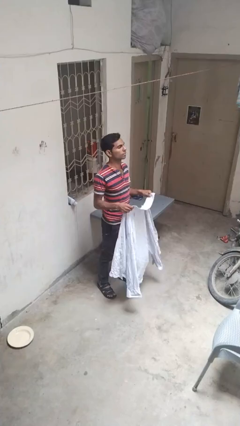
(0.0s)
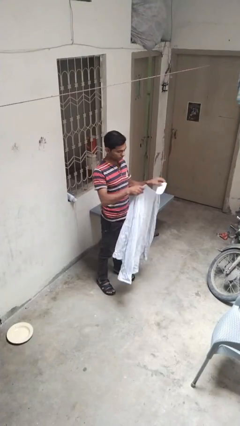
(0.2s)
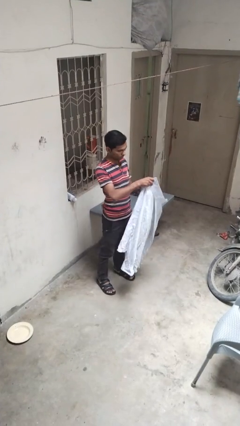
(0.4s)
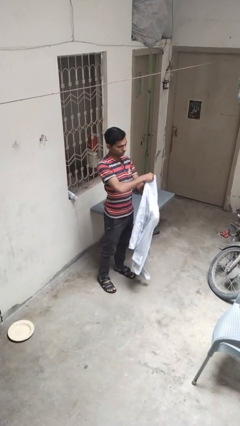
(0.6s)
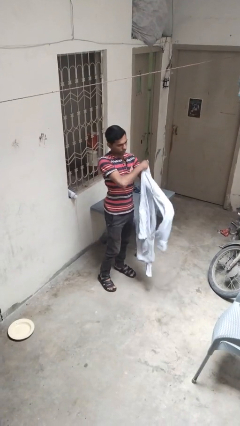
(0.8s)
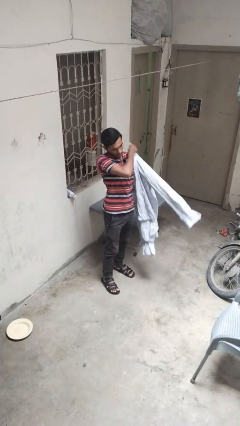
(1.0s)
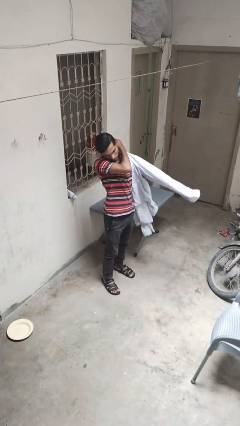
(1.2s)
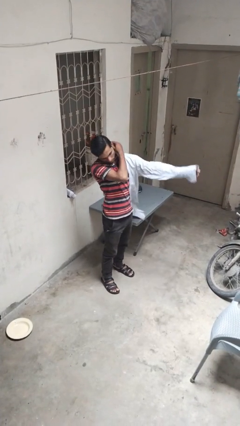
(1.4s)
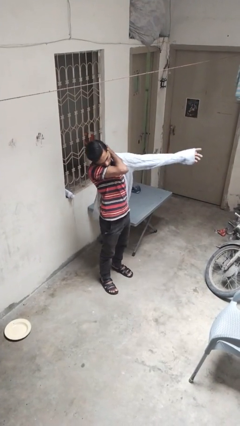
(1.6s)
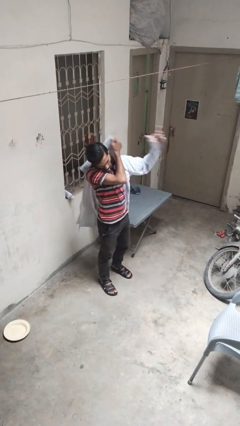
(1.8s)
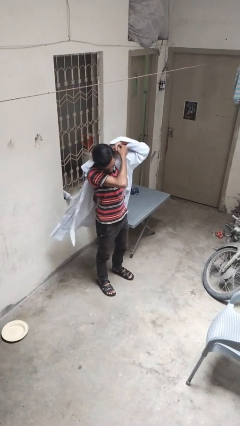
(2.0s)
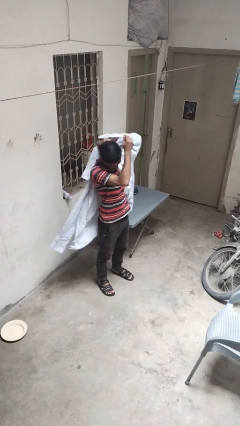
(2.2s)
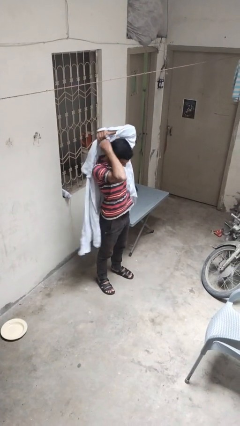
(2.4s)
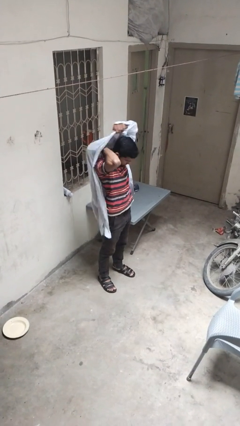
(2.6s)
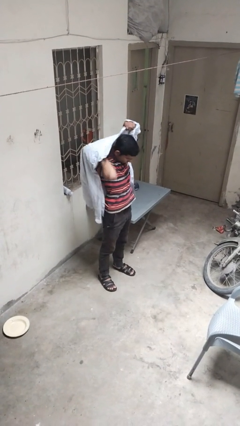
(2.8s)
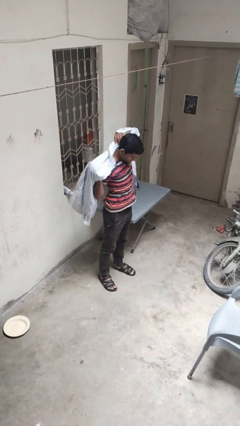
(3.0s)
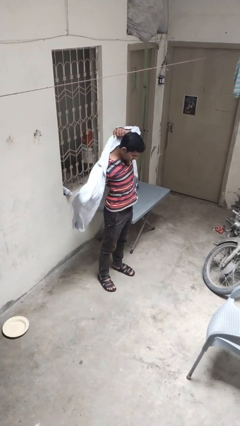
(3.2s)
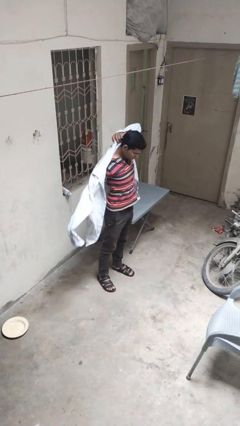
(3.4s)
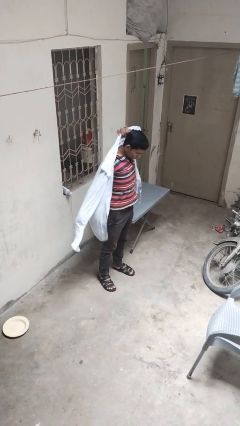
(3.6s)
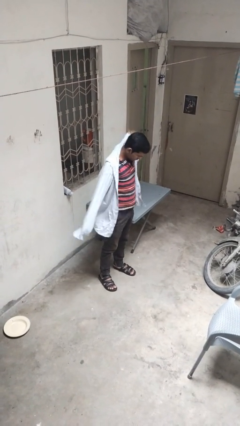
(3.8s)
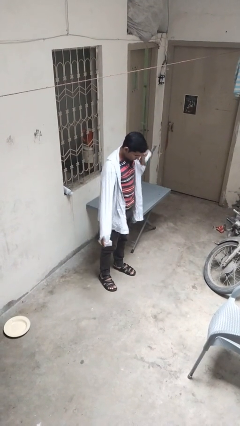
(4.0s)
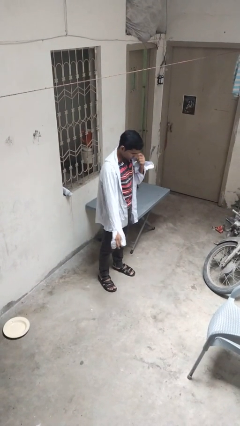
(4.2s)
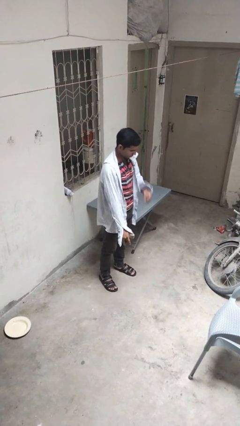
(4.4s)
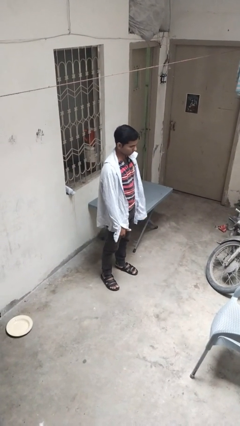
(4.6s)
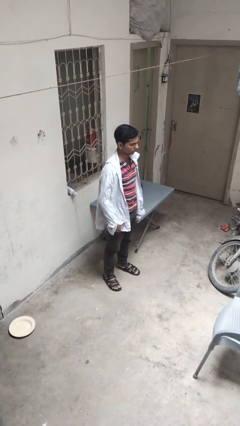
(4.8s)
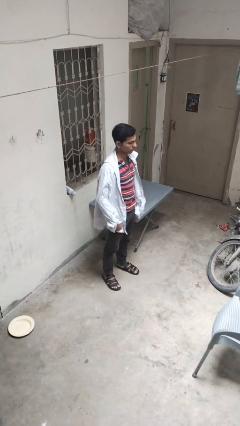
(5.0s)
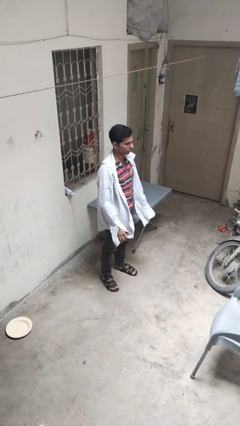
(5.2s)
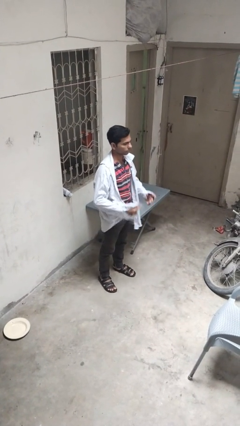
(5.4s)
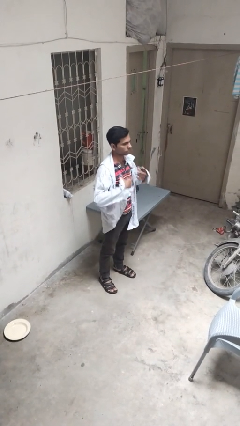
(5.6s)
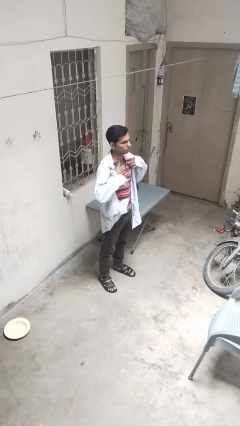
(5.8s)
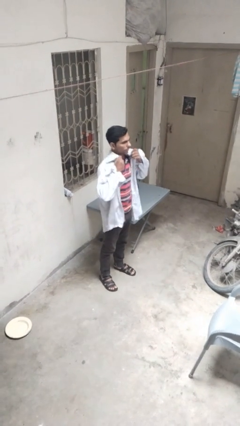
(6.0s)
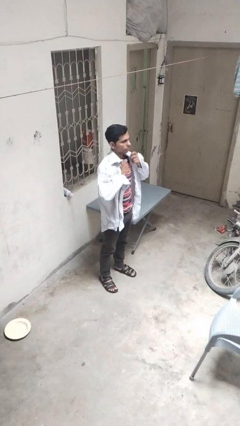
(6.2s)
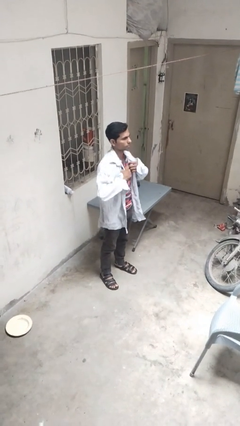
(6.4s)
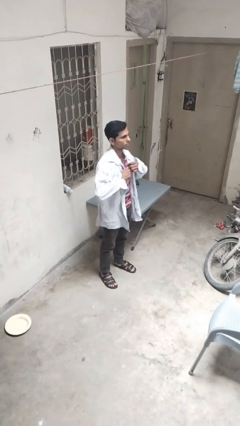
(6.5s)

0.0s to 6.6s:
person puts on shirt

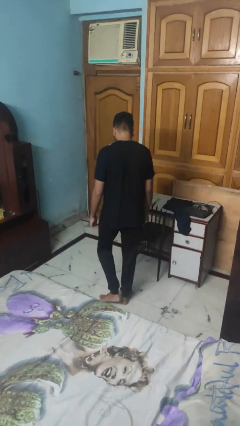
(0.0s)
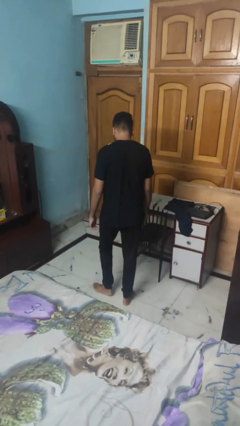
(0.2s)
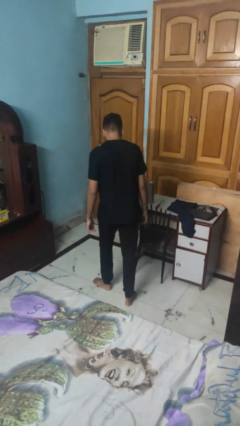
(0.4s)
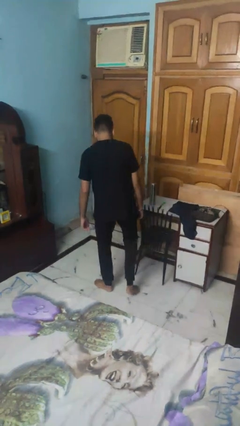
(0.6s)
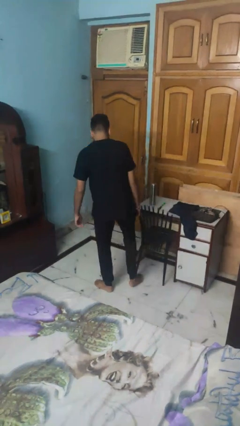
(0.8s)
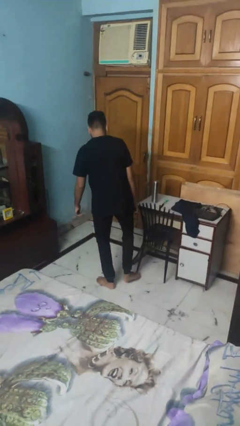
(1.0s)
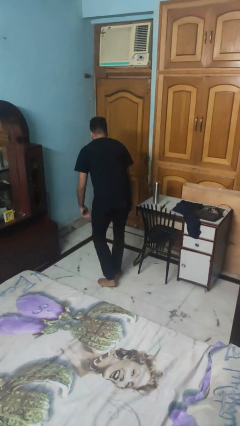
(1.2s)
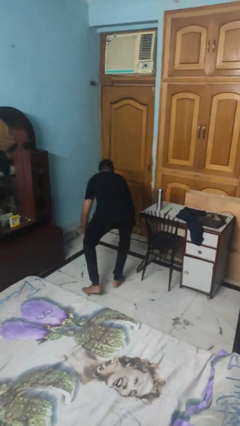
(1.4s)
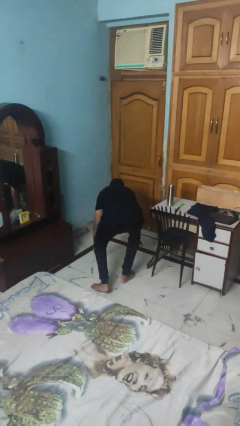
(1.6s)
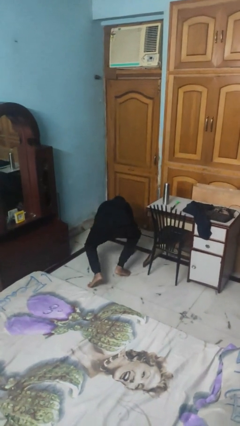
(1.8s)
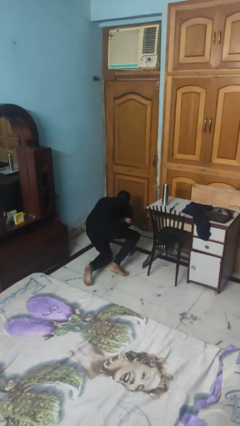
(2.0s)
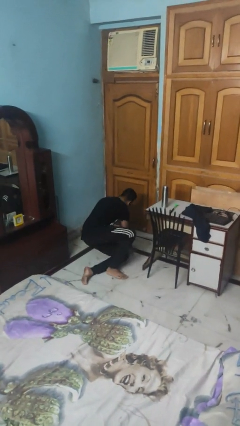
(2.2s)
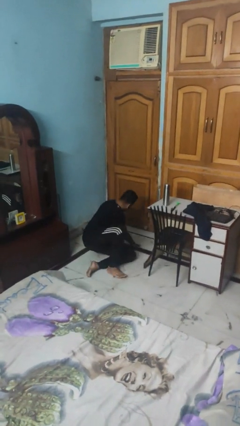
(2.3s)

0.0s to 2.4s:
person trips on object on floor

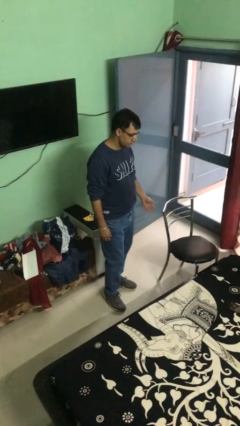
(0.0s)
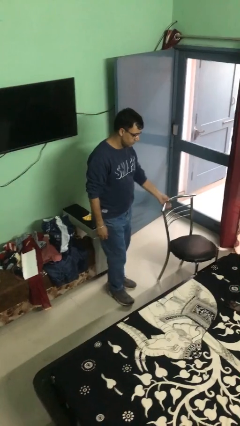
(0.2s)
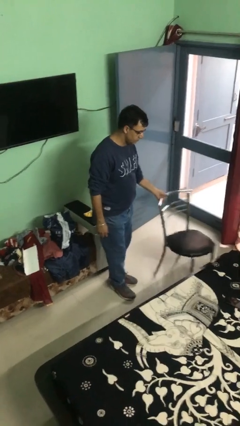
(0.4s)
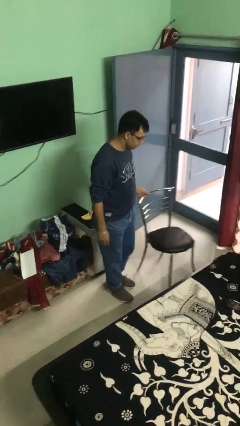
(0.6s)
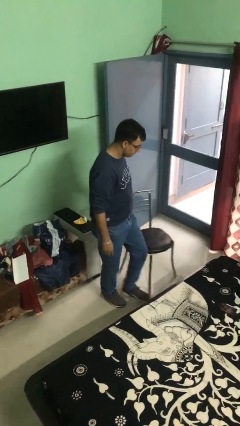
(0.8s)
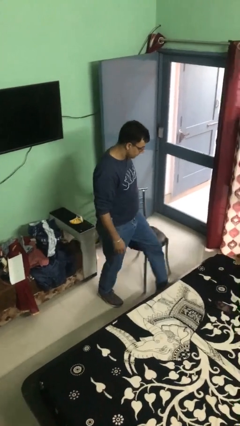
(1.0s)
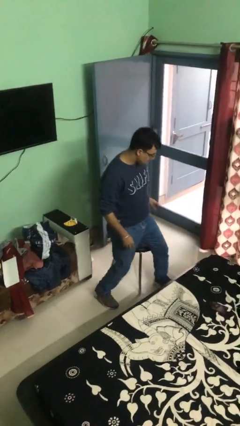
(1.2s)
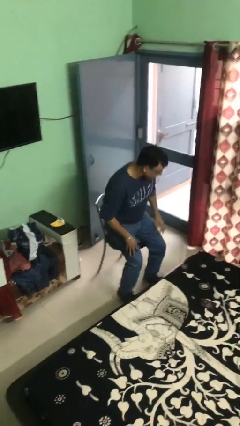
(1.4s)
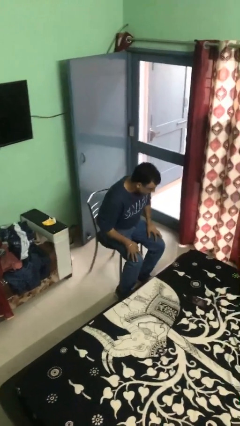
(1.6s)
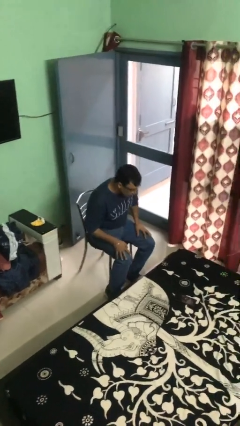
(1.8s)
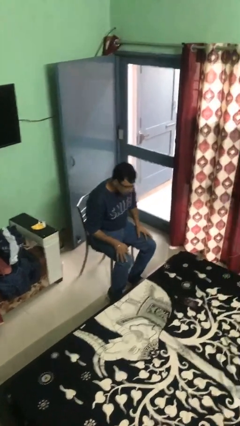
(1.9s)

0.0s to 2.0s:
person sits down

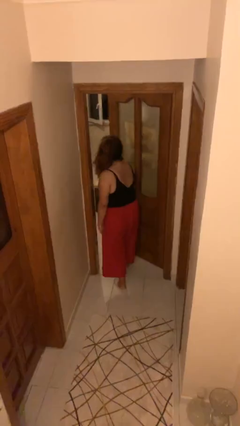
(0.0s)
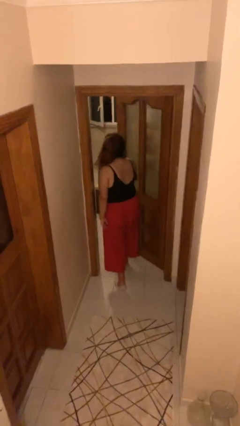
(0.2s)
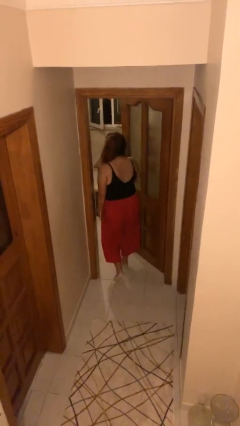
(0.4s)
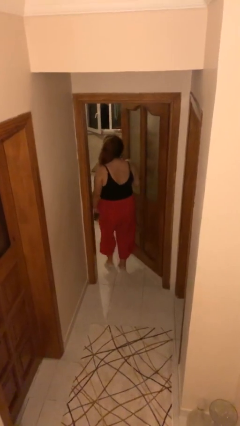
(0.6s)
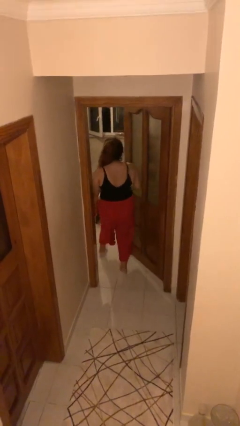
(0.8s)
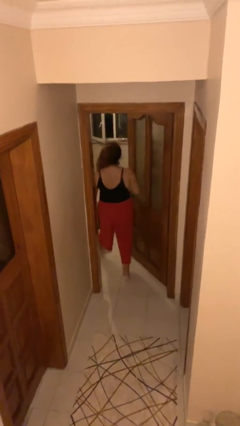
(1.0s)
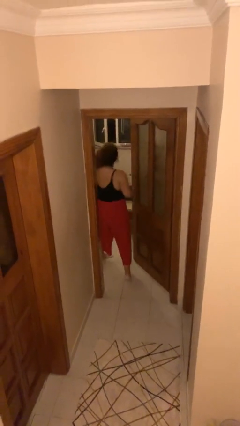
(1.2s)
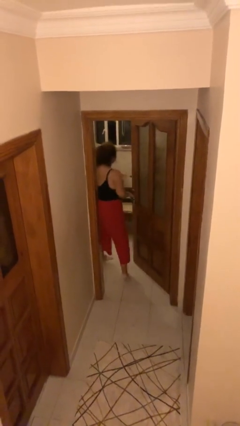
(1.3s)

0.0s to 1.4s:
person exits scene through structure

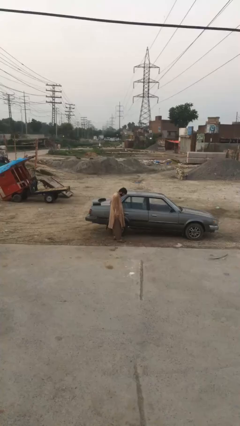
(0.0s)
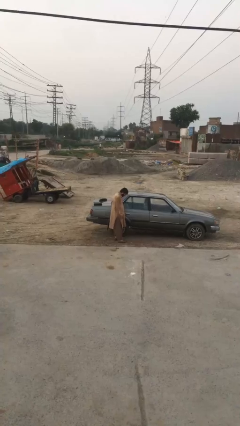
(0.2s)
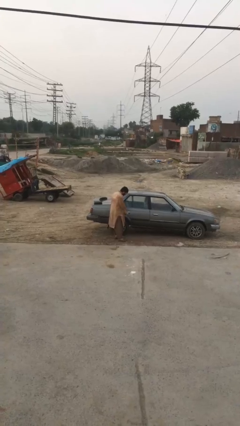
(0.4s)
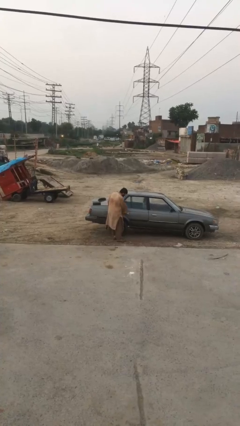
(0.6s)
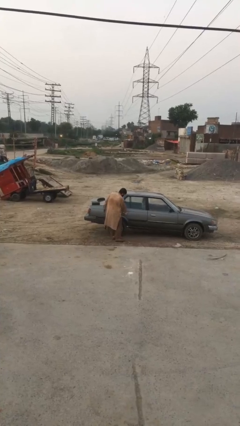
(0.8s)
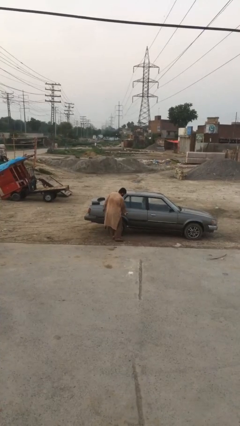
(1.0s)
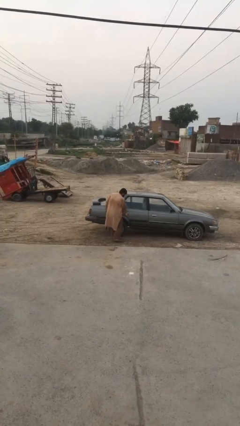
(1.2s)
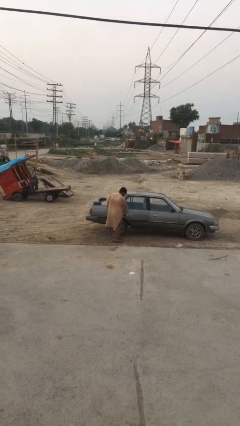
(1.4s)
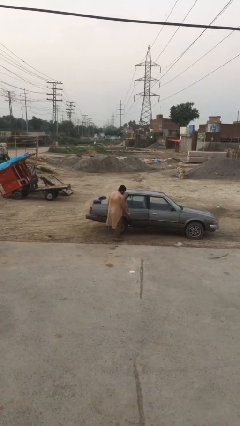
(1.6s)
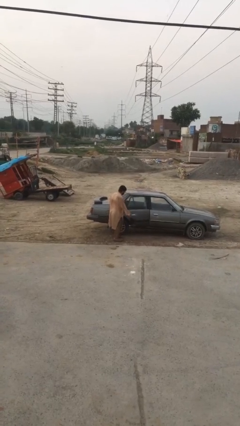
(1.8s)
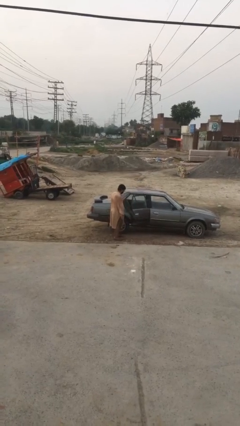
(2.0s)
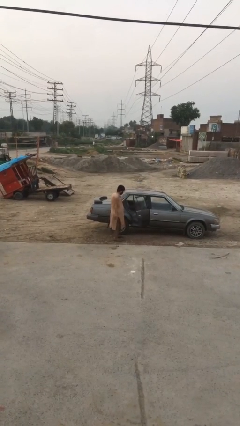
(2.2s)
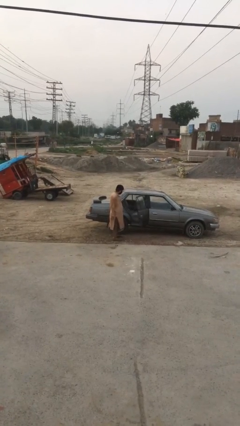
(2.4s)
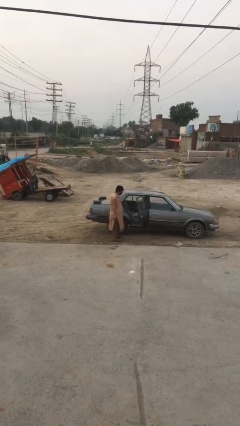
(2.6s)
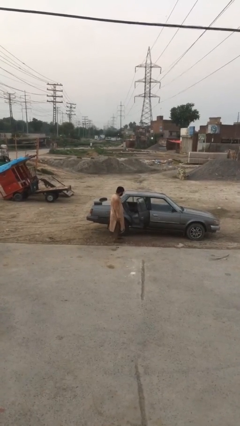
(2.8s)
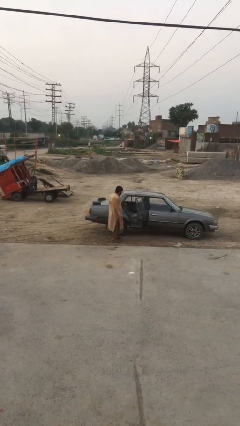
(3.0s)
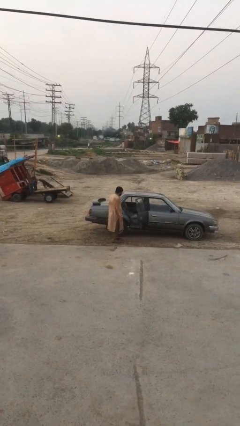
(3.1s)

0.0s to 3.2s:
person opens car door

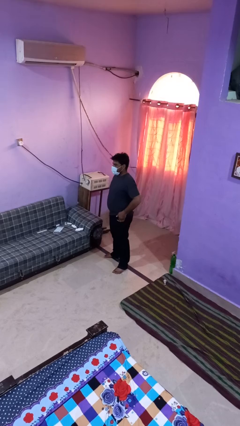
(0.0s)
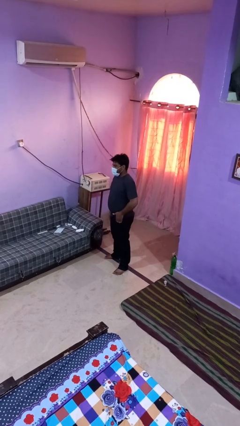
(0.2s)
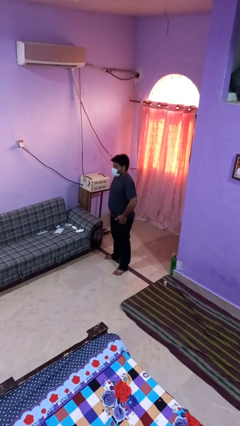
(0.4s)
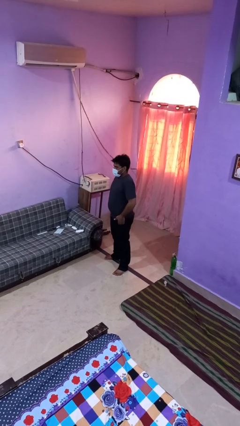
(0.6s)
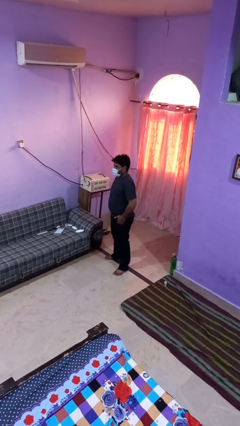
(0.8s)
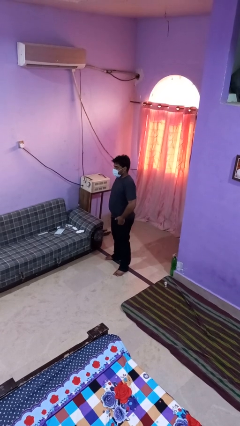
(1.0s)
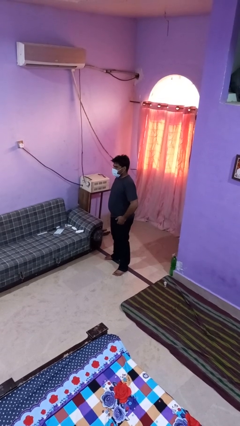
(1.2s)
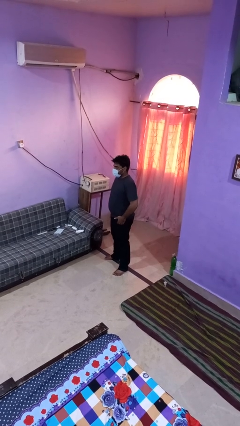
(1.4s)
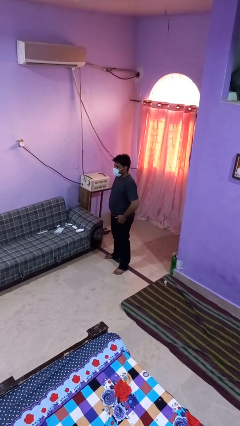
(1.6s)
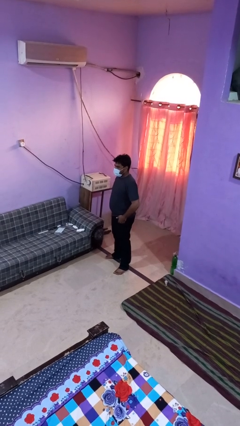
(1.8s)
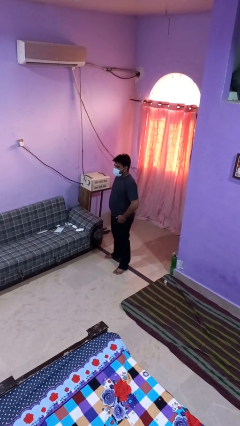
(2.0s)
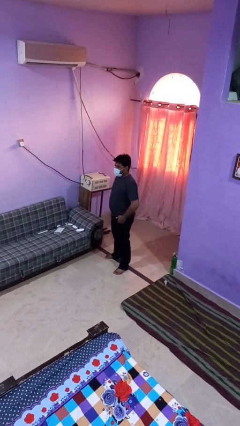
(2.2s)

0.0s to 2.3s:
person puts hands in back pockets
